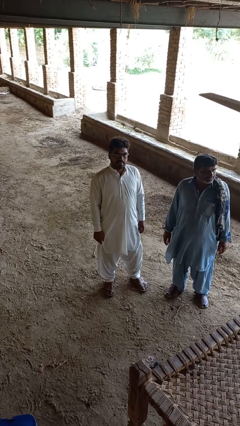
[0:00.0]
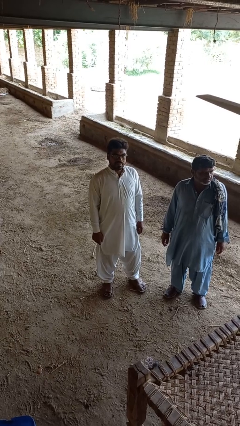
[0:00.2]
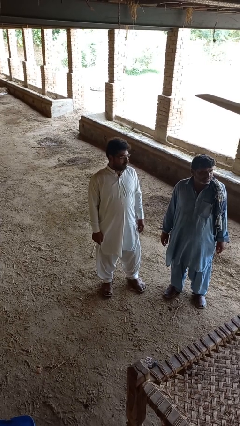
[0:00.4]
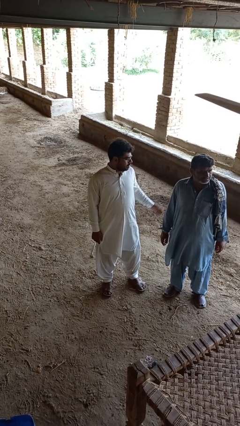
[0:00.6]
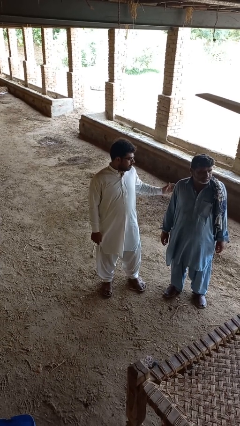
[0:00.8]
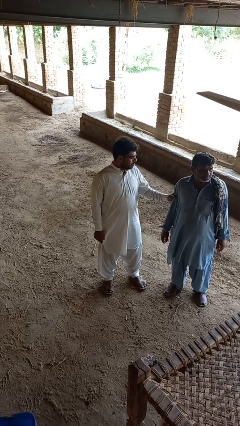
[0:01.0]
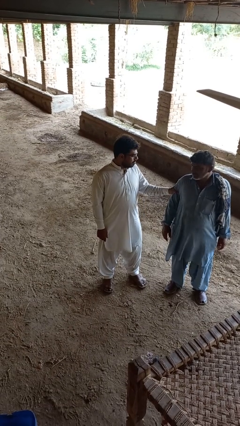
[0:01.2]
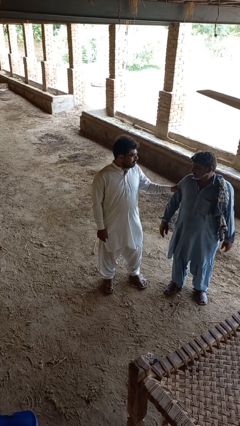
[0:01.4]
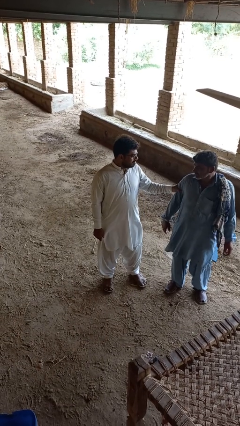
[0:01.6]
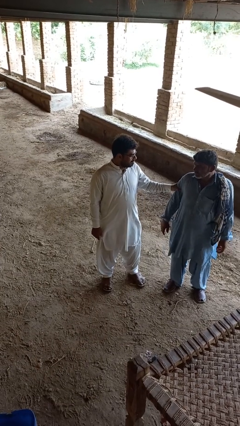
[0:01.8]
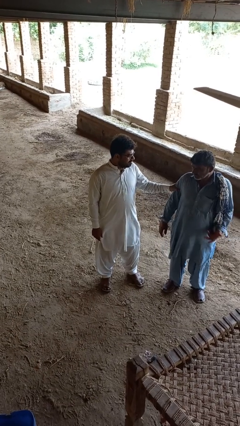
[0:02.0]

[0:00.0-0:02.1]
person grabs person by bicep

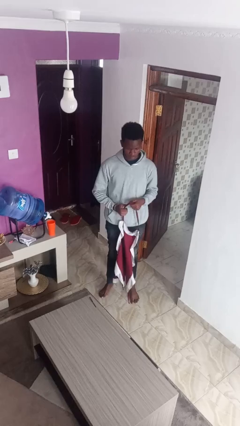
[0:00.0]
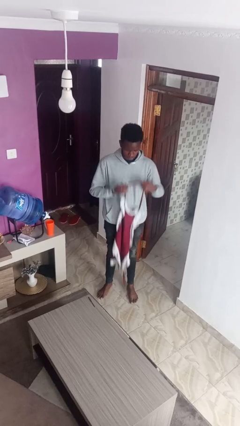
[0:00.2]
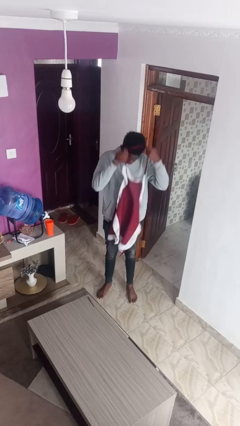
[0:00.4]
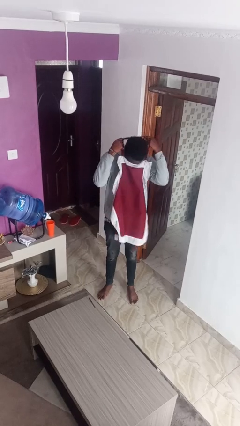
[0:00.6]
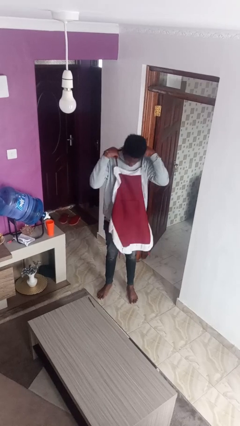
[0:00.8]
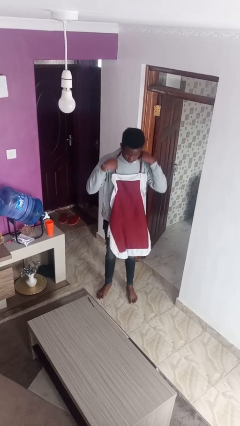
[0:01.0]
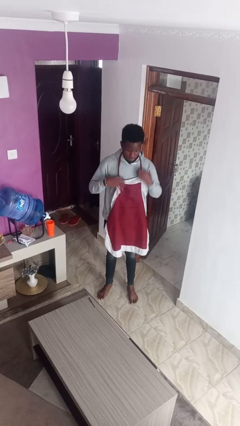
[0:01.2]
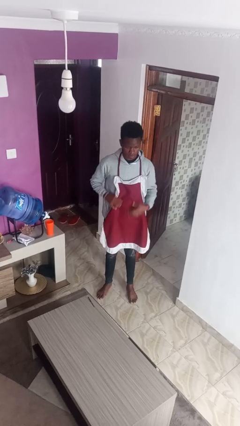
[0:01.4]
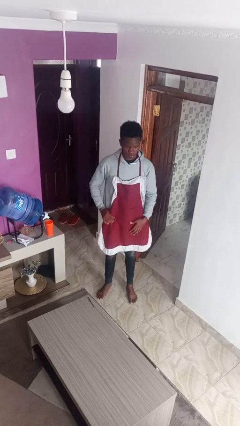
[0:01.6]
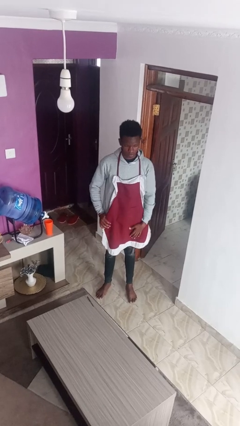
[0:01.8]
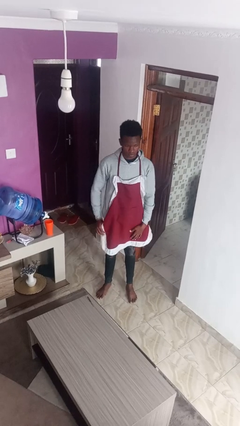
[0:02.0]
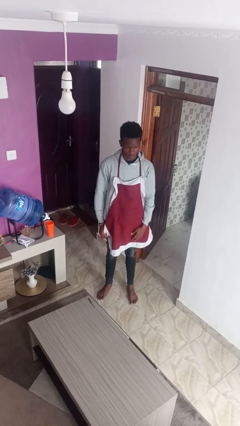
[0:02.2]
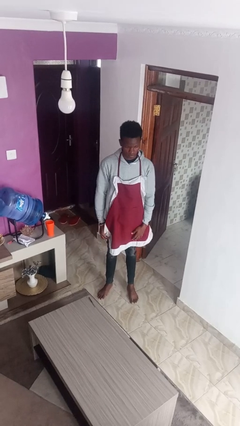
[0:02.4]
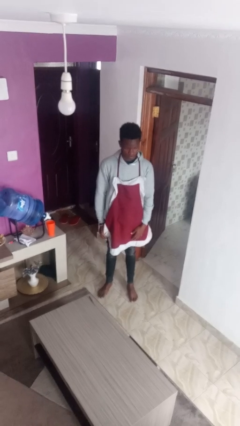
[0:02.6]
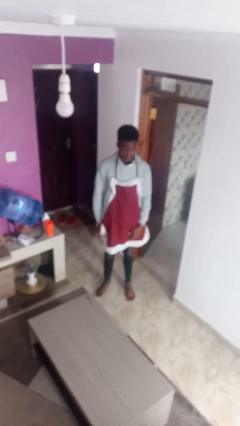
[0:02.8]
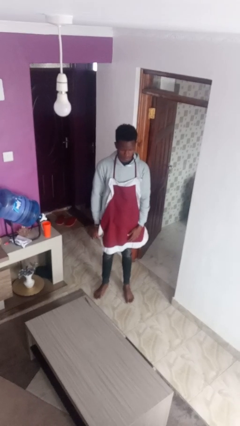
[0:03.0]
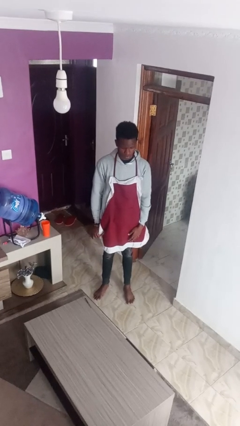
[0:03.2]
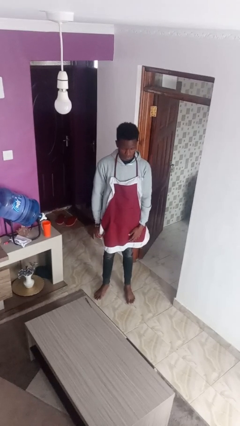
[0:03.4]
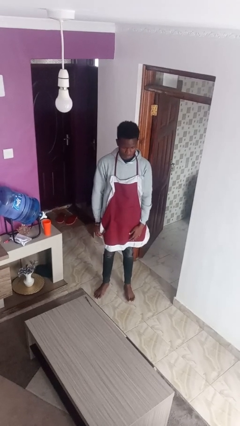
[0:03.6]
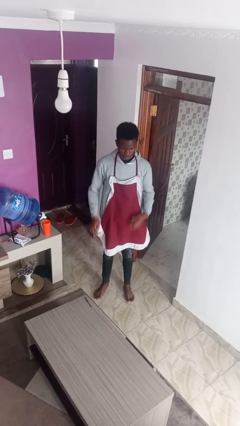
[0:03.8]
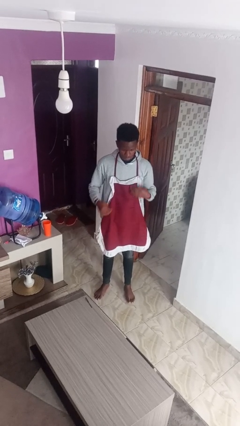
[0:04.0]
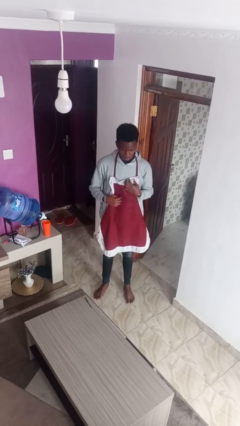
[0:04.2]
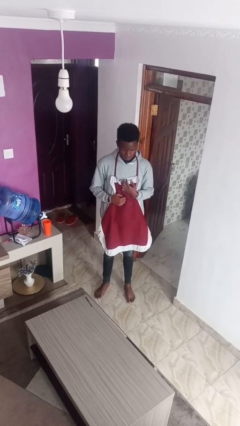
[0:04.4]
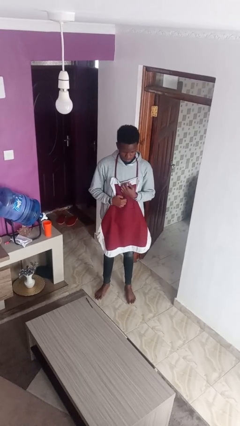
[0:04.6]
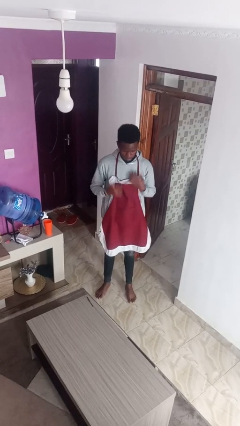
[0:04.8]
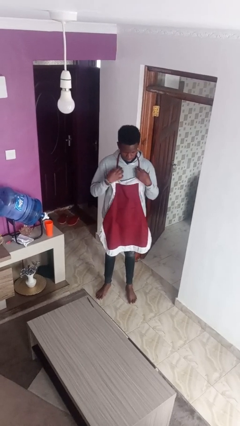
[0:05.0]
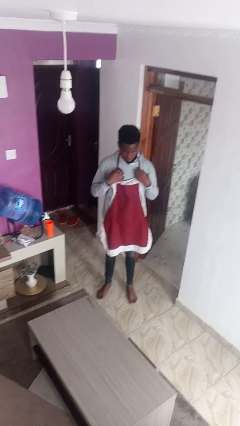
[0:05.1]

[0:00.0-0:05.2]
person puts on apron

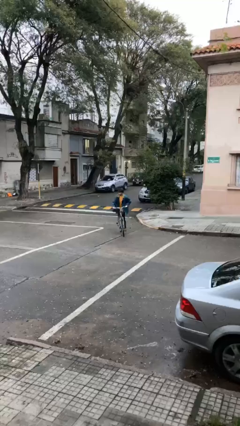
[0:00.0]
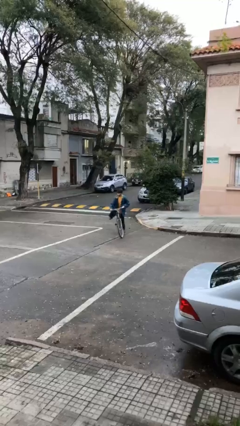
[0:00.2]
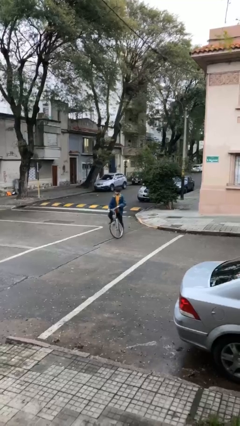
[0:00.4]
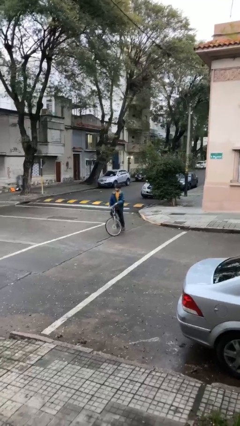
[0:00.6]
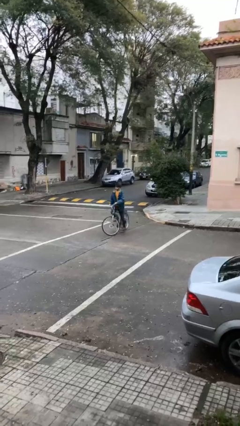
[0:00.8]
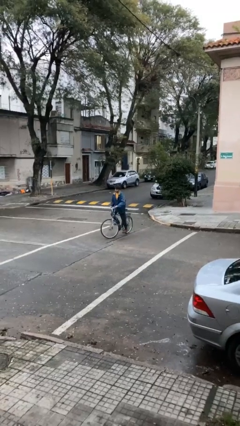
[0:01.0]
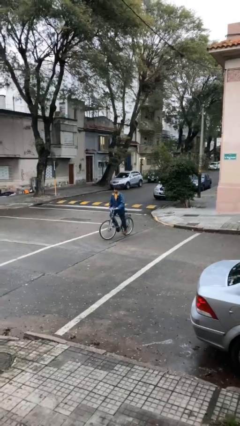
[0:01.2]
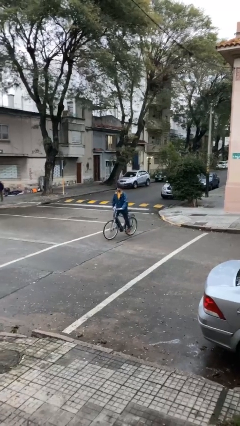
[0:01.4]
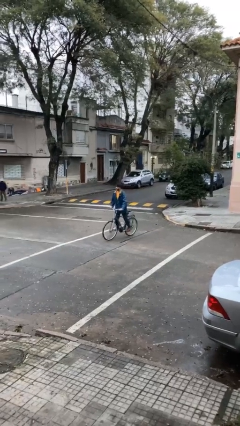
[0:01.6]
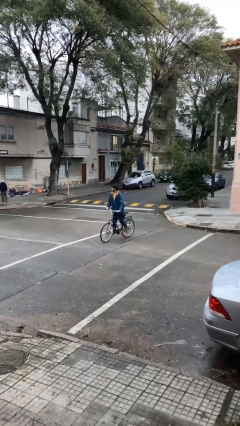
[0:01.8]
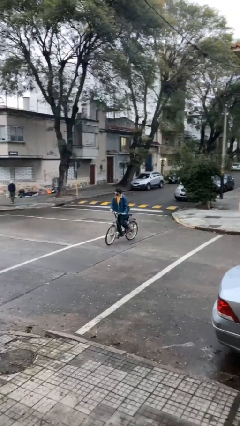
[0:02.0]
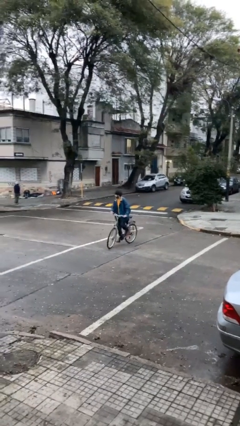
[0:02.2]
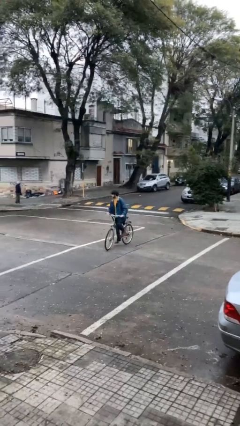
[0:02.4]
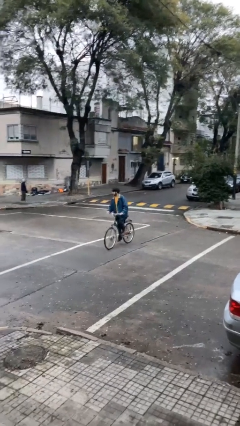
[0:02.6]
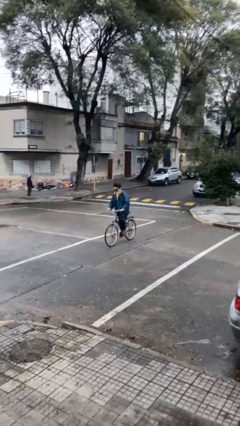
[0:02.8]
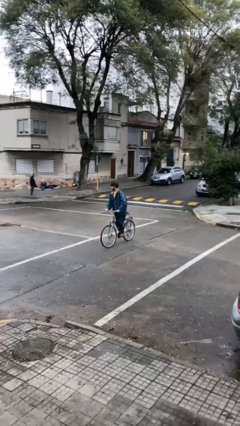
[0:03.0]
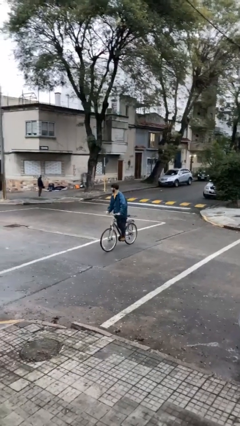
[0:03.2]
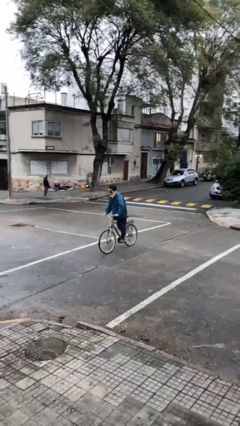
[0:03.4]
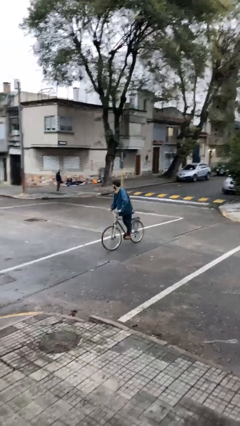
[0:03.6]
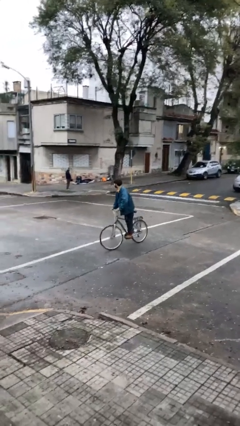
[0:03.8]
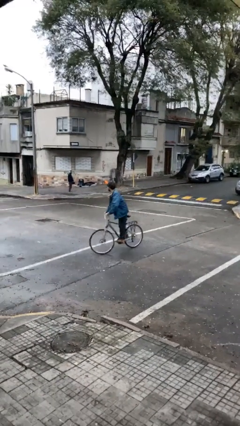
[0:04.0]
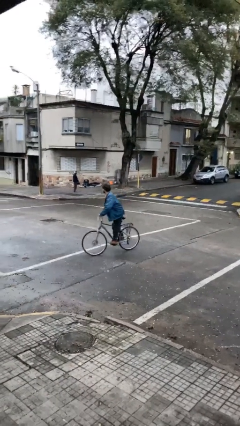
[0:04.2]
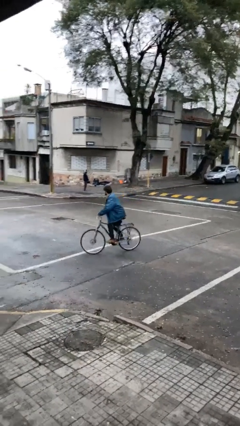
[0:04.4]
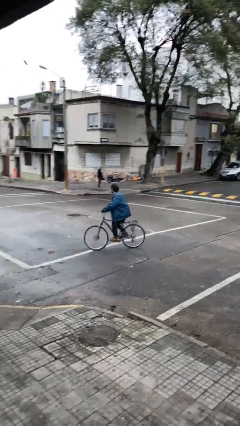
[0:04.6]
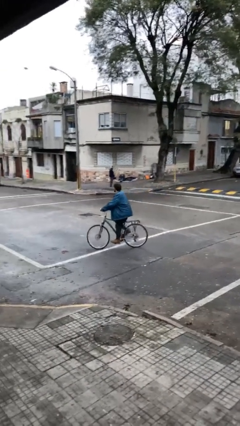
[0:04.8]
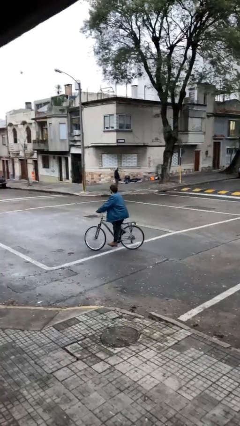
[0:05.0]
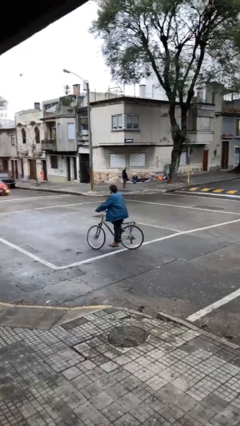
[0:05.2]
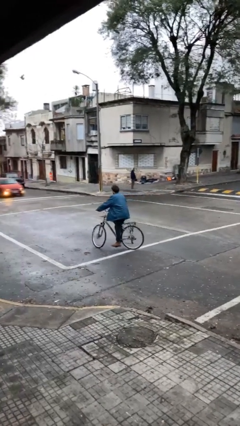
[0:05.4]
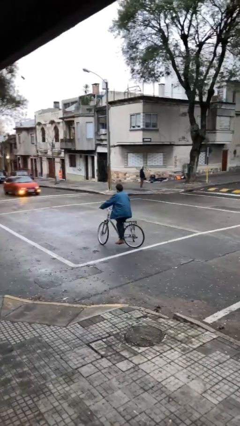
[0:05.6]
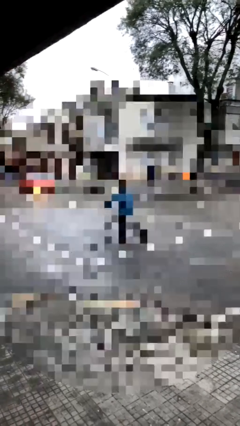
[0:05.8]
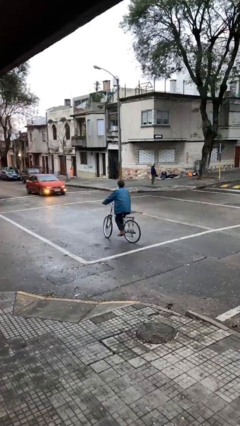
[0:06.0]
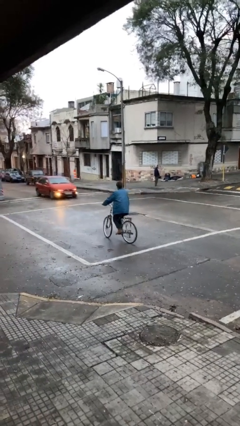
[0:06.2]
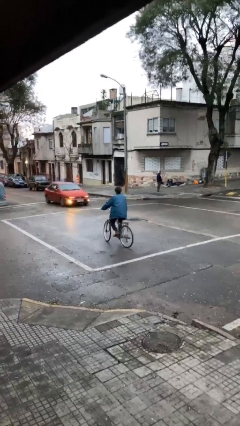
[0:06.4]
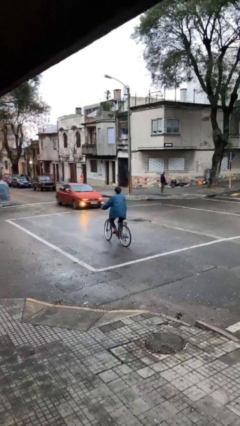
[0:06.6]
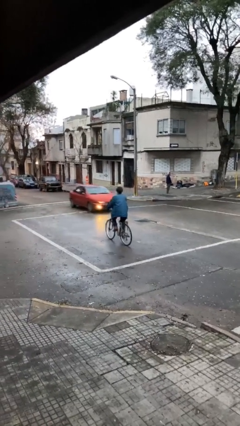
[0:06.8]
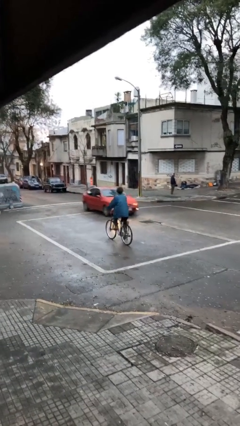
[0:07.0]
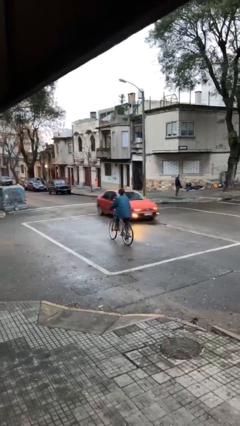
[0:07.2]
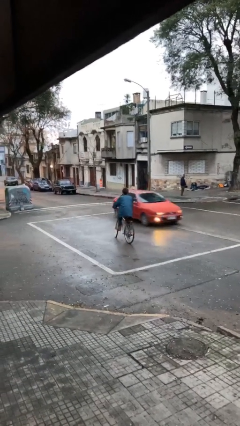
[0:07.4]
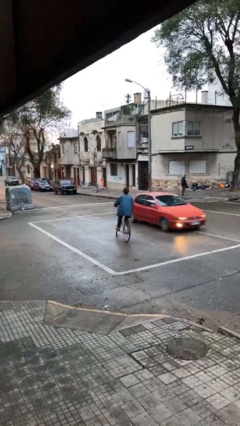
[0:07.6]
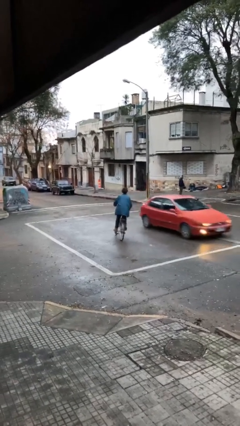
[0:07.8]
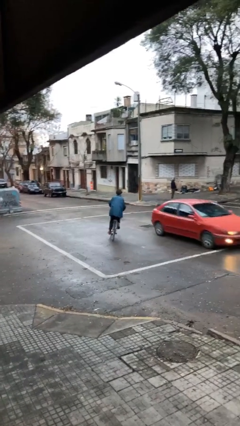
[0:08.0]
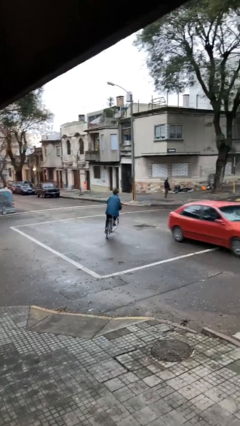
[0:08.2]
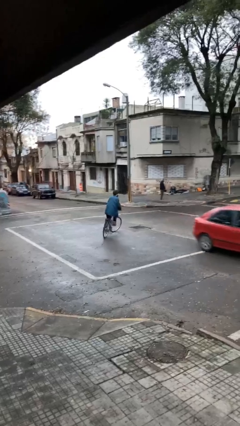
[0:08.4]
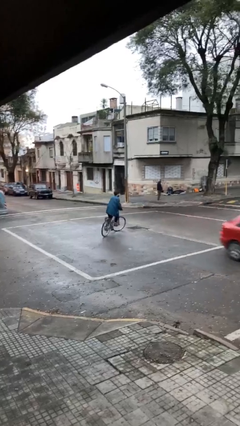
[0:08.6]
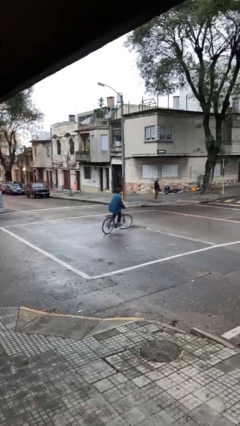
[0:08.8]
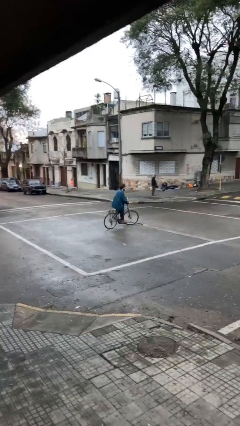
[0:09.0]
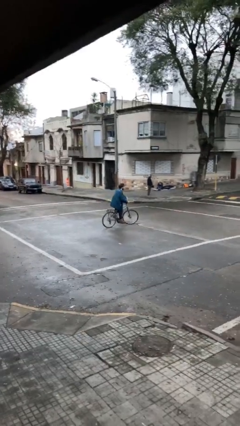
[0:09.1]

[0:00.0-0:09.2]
person rides bicycle

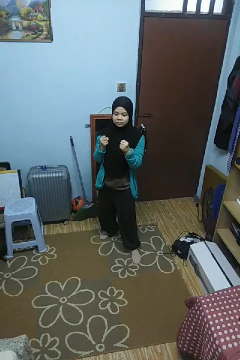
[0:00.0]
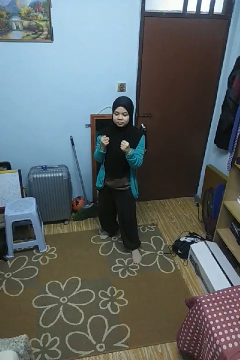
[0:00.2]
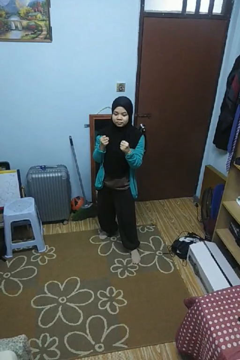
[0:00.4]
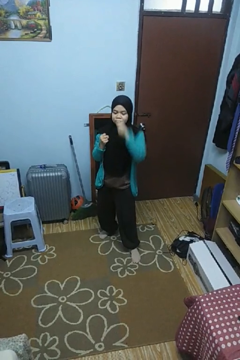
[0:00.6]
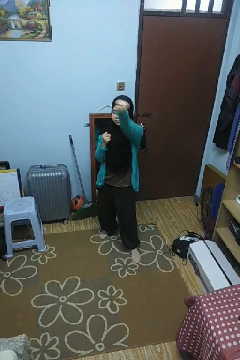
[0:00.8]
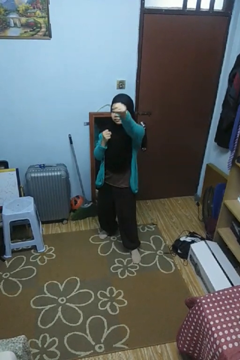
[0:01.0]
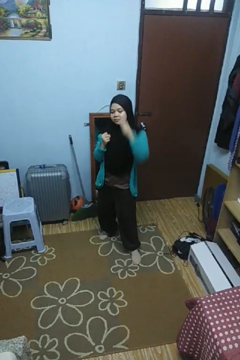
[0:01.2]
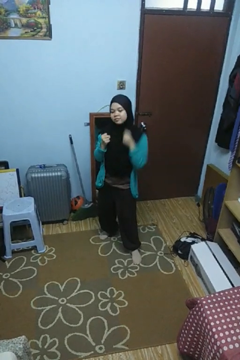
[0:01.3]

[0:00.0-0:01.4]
person punches

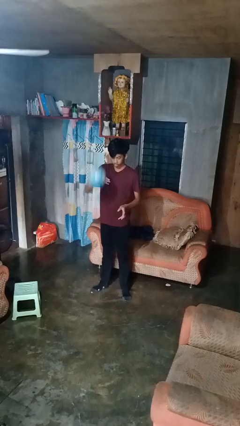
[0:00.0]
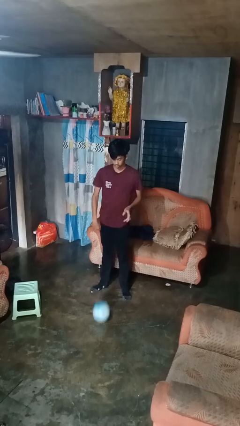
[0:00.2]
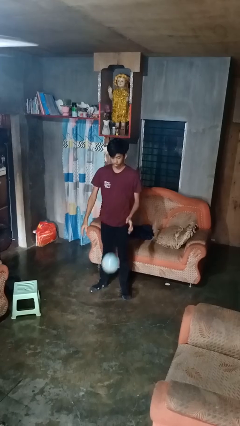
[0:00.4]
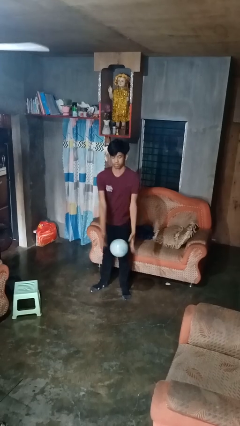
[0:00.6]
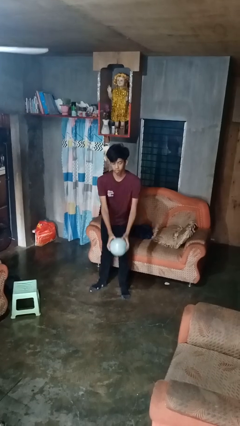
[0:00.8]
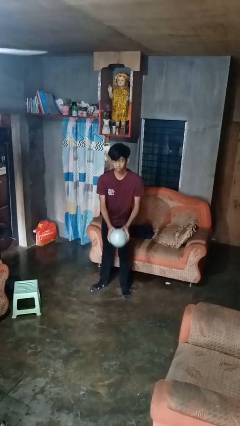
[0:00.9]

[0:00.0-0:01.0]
person bounces ball on floor
